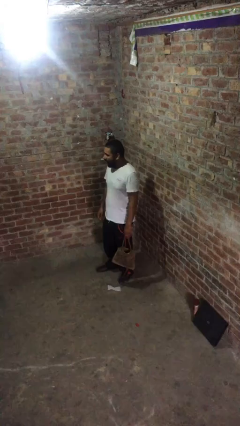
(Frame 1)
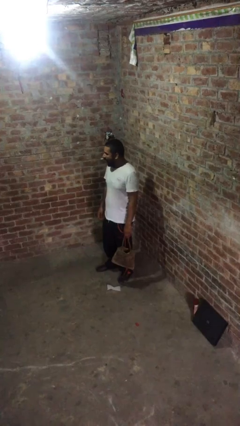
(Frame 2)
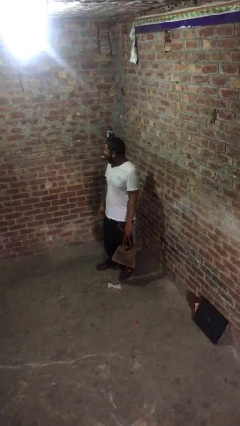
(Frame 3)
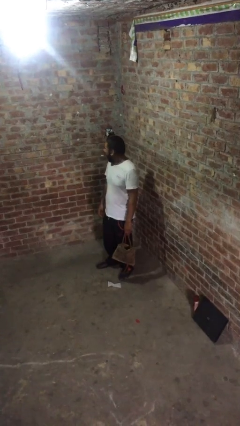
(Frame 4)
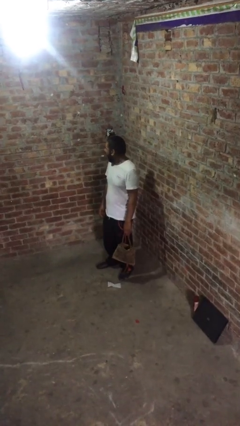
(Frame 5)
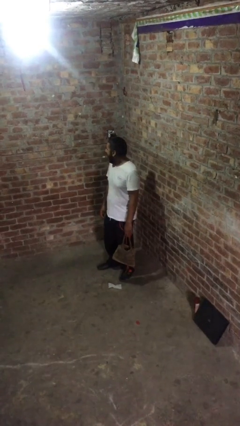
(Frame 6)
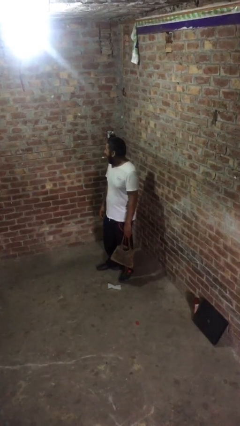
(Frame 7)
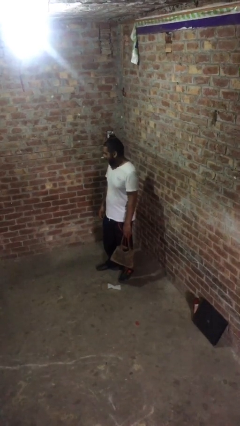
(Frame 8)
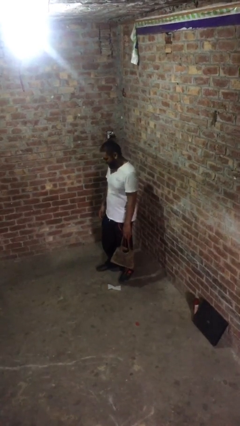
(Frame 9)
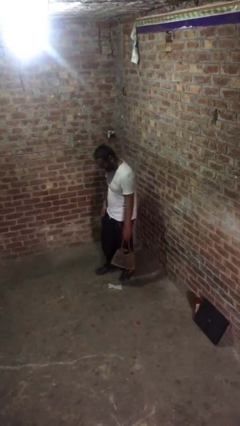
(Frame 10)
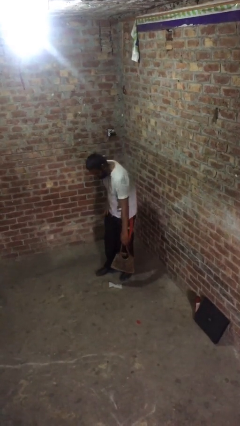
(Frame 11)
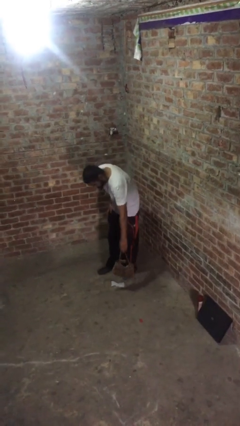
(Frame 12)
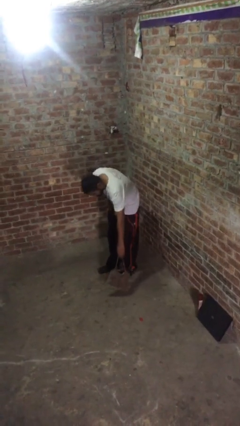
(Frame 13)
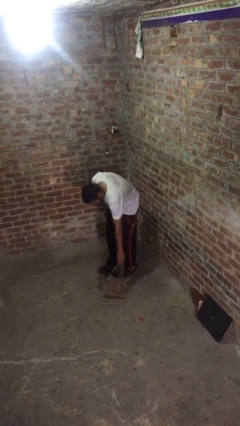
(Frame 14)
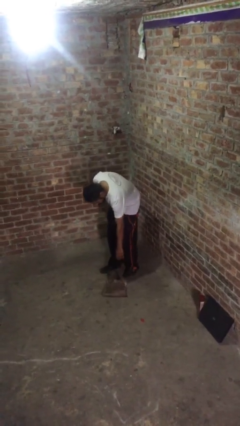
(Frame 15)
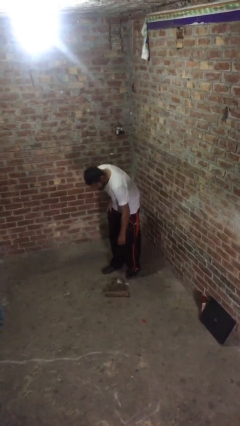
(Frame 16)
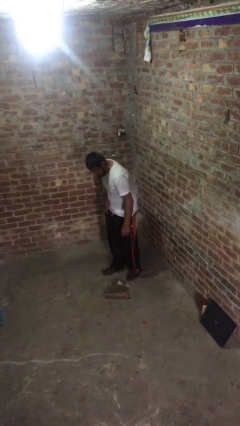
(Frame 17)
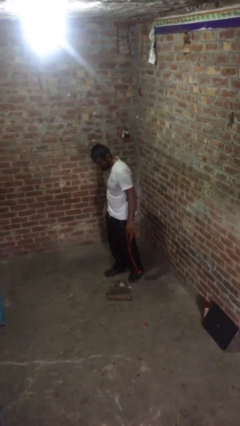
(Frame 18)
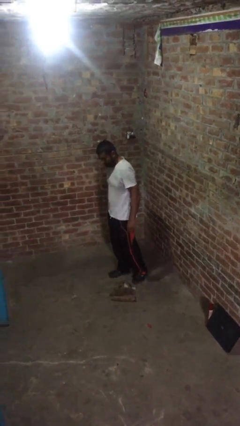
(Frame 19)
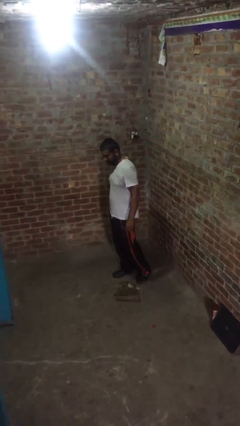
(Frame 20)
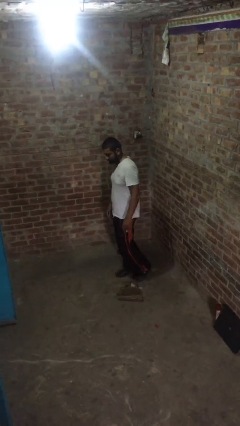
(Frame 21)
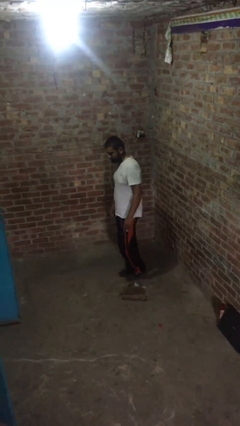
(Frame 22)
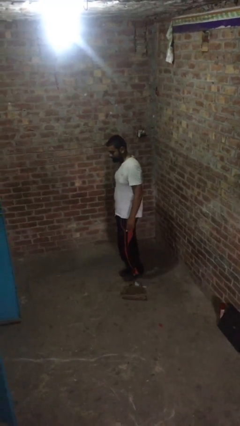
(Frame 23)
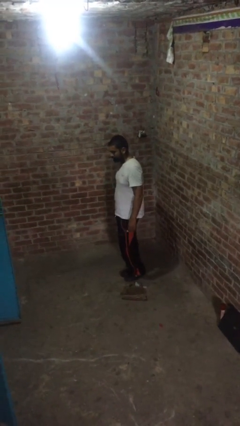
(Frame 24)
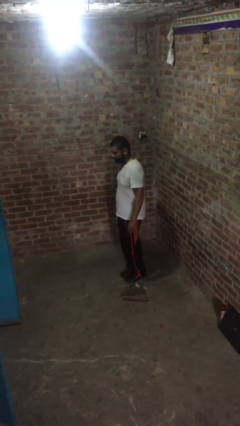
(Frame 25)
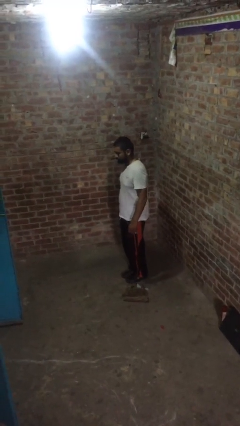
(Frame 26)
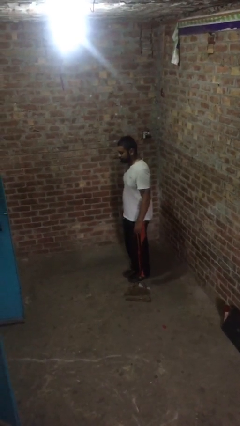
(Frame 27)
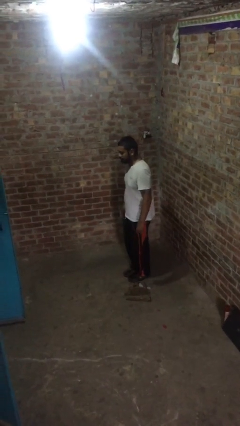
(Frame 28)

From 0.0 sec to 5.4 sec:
person puts down object on floor

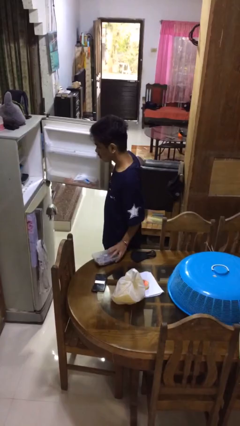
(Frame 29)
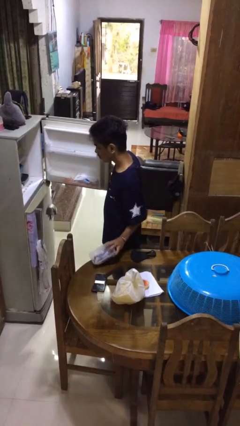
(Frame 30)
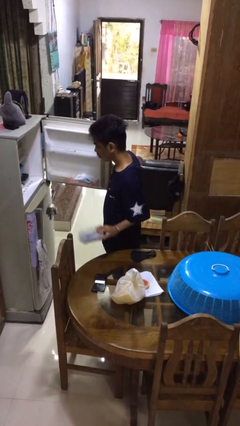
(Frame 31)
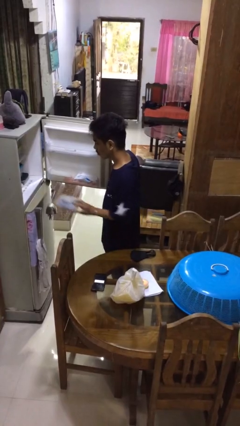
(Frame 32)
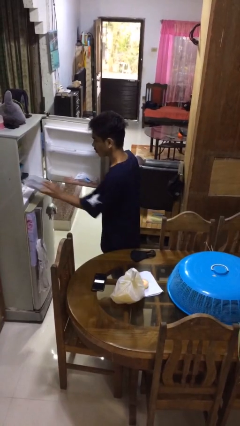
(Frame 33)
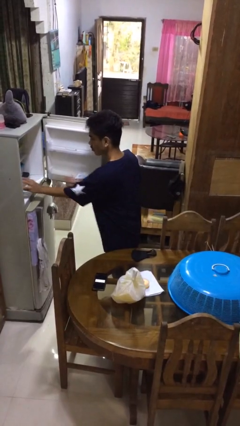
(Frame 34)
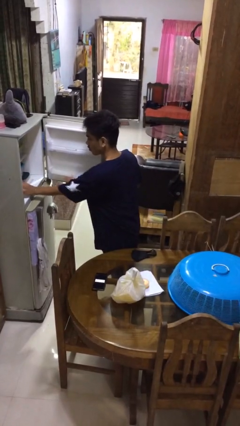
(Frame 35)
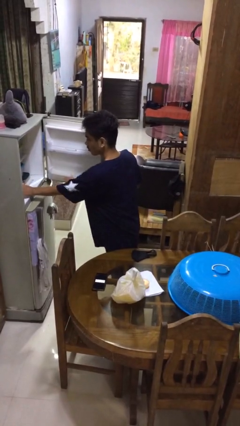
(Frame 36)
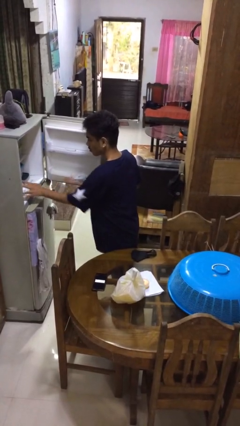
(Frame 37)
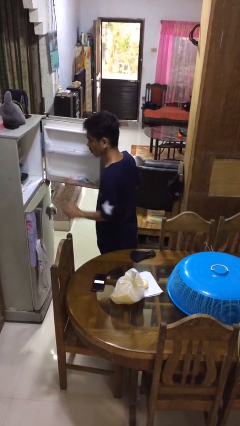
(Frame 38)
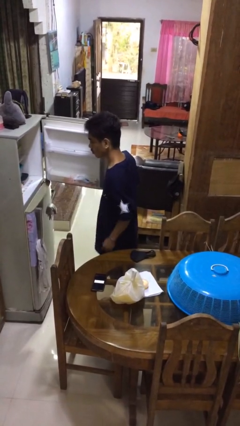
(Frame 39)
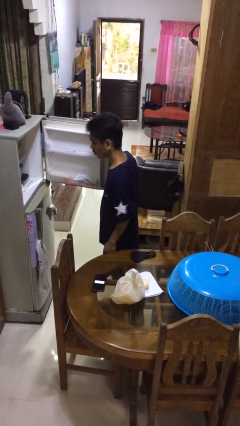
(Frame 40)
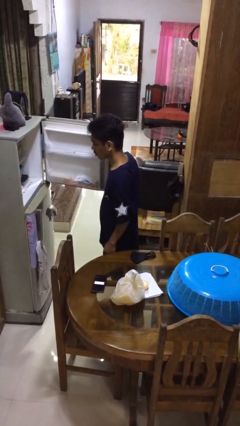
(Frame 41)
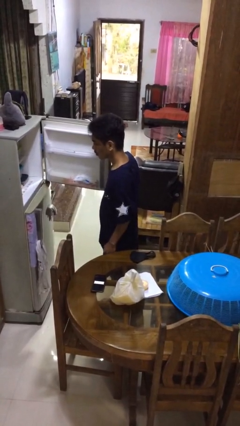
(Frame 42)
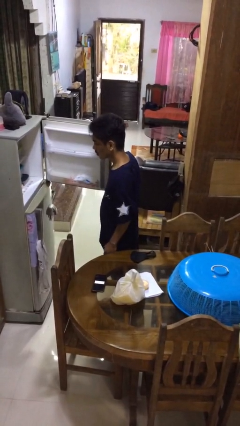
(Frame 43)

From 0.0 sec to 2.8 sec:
person puts object into refrigerator

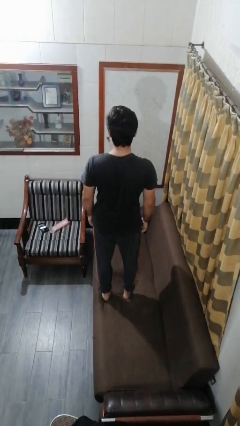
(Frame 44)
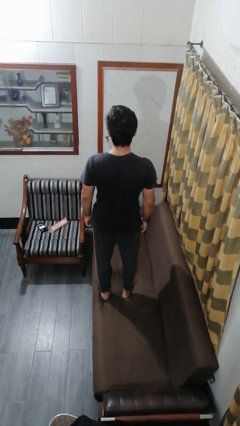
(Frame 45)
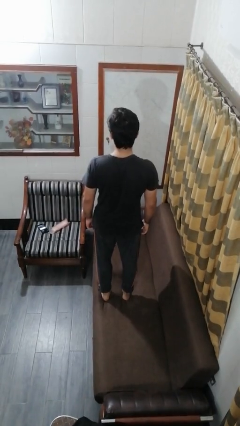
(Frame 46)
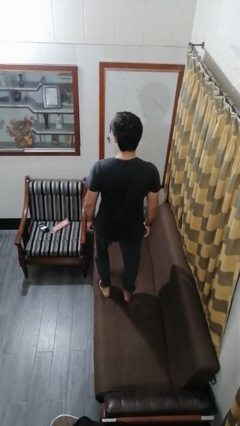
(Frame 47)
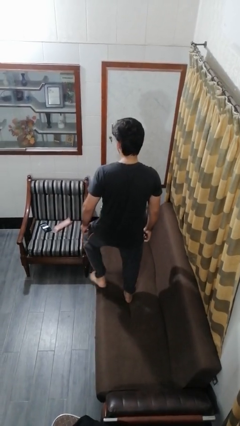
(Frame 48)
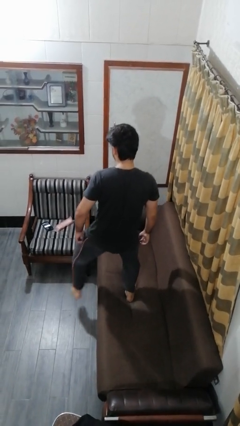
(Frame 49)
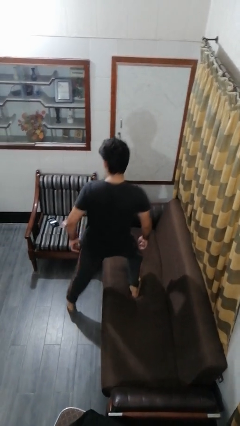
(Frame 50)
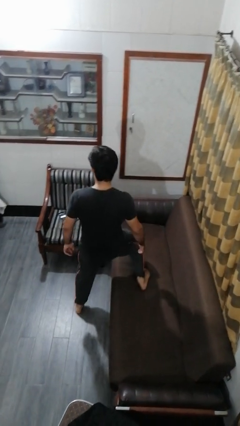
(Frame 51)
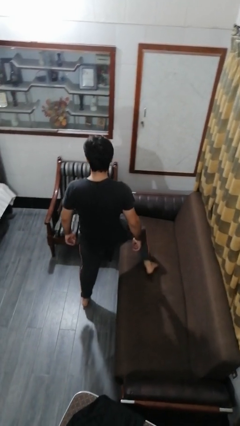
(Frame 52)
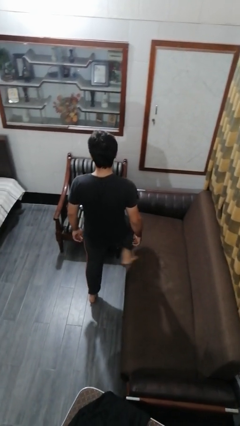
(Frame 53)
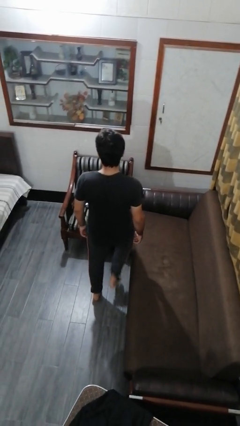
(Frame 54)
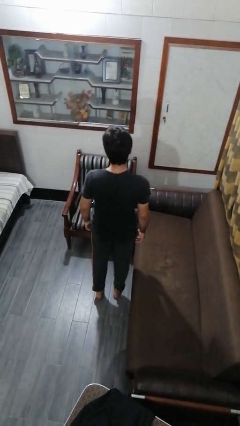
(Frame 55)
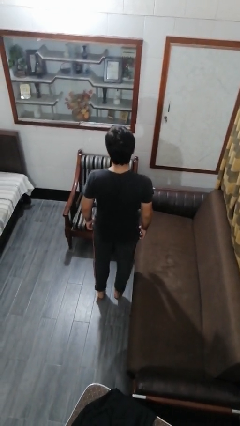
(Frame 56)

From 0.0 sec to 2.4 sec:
person climbs off couch

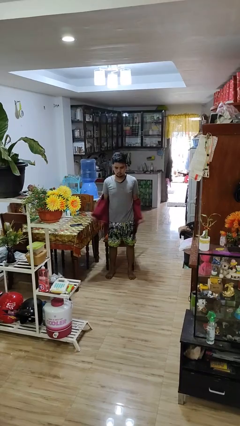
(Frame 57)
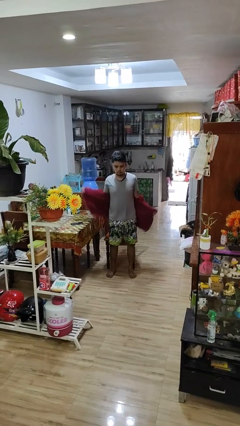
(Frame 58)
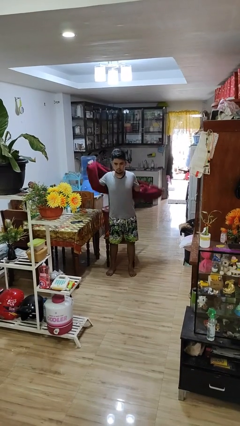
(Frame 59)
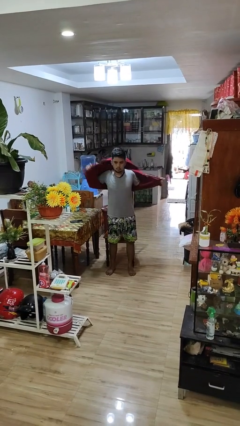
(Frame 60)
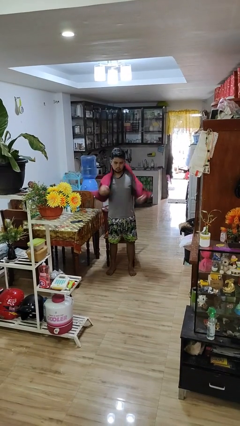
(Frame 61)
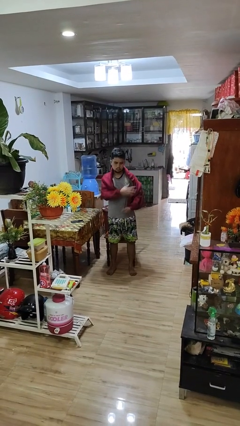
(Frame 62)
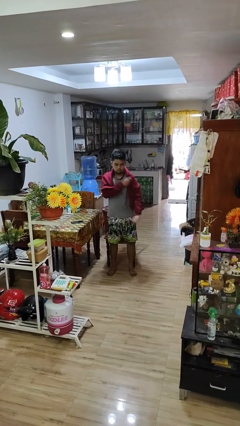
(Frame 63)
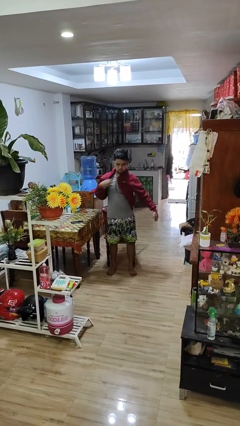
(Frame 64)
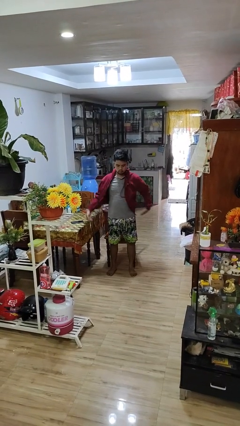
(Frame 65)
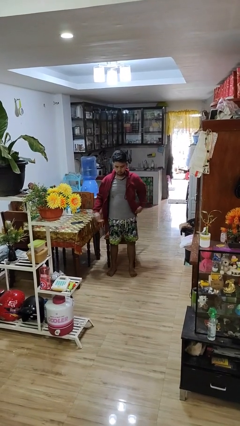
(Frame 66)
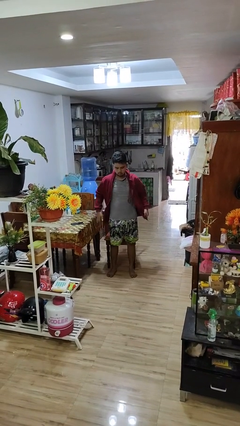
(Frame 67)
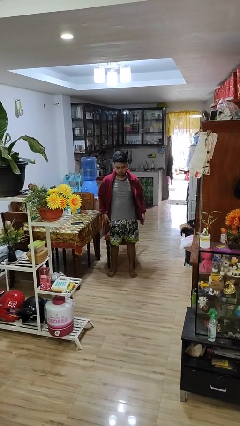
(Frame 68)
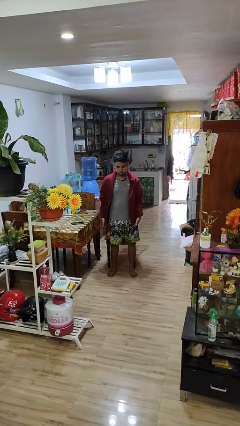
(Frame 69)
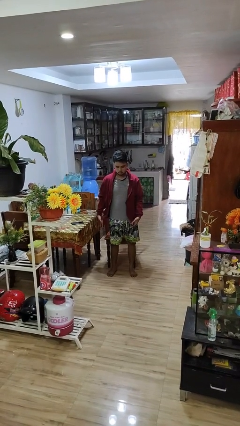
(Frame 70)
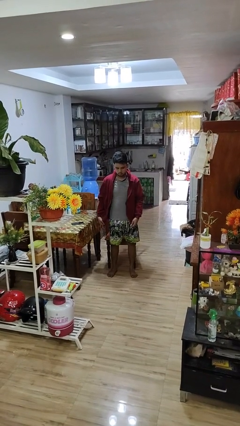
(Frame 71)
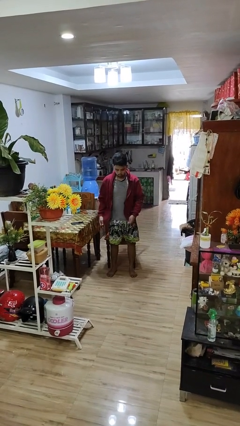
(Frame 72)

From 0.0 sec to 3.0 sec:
person puts on jacket

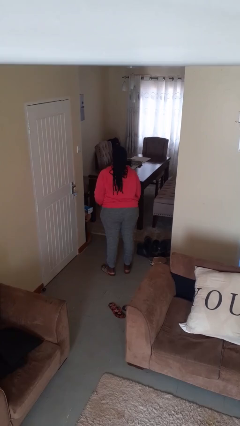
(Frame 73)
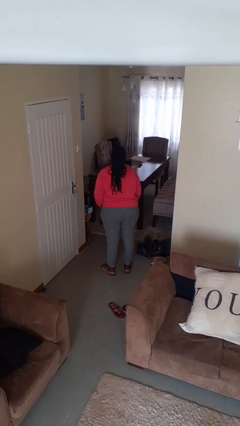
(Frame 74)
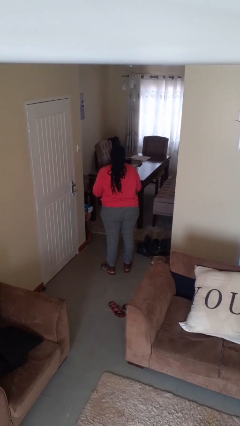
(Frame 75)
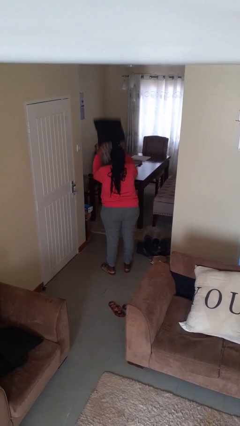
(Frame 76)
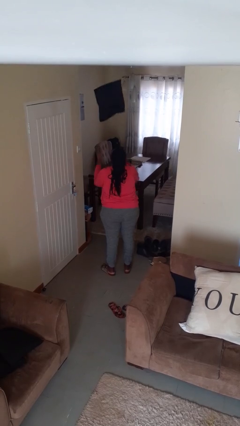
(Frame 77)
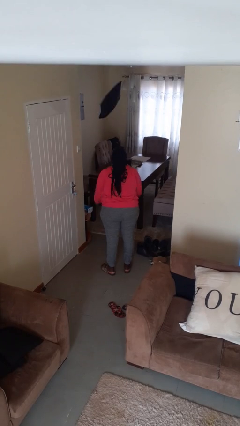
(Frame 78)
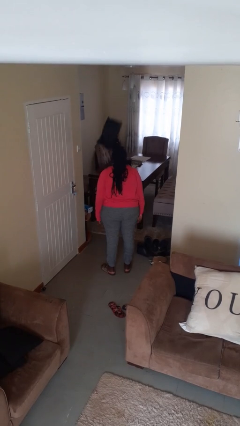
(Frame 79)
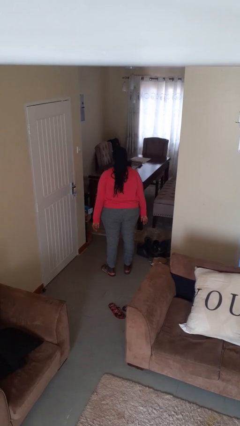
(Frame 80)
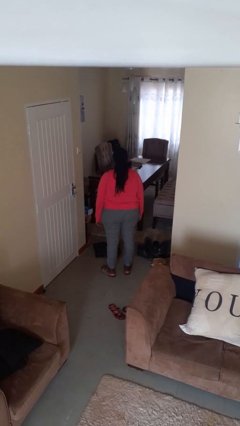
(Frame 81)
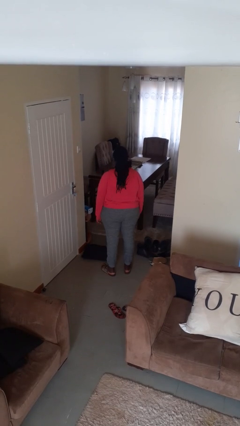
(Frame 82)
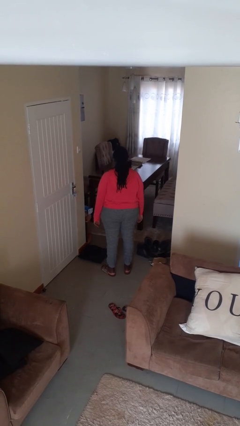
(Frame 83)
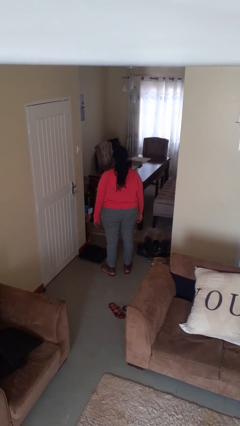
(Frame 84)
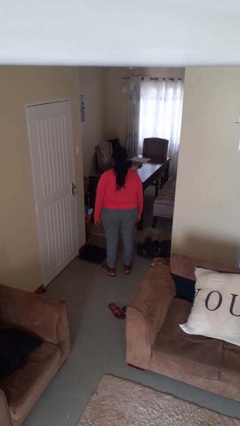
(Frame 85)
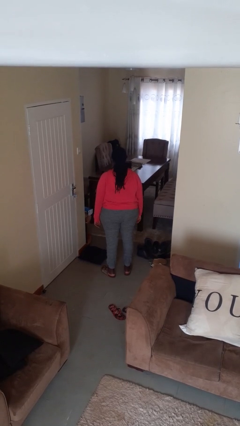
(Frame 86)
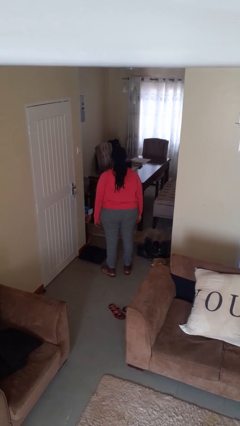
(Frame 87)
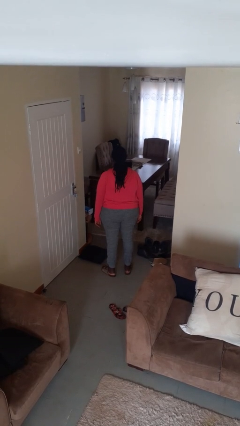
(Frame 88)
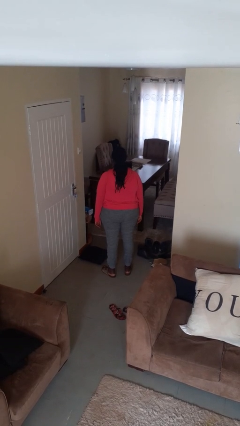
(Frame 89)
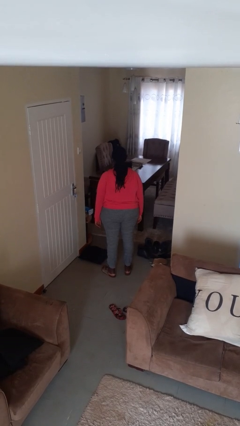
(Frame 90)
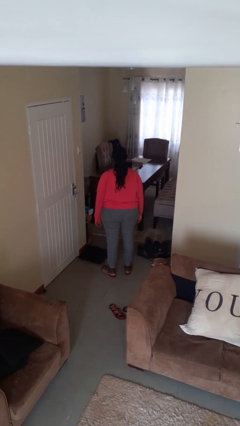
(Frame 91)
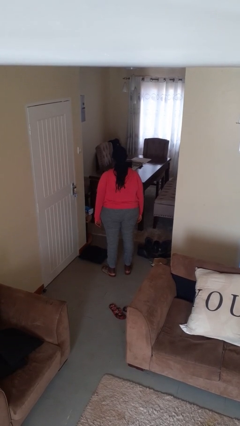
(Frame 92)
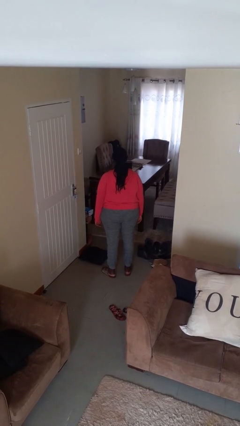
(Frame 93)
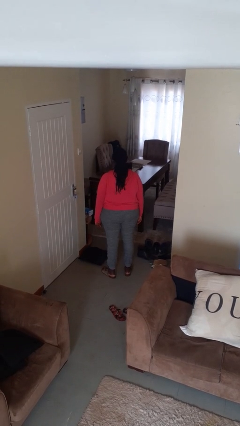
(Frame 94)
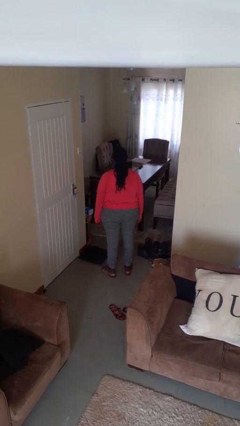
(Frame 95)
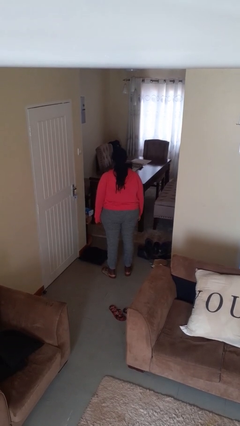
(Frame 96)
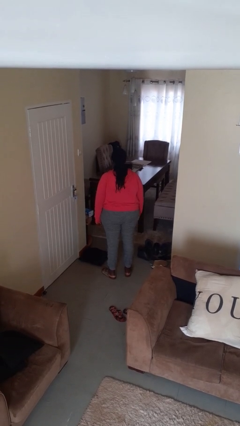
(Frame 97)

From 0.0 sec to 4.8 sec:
person throws object into air
